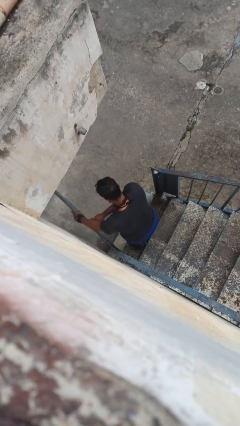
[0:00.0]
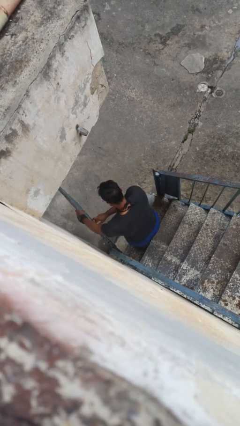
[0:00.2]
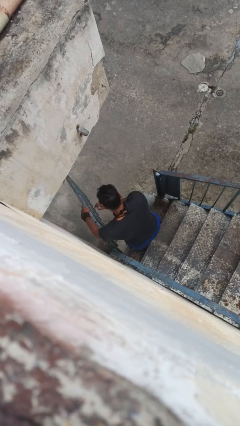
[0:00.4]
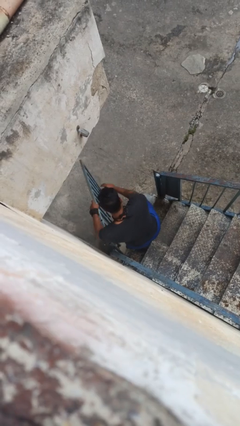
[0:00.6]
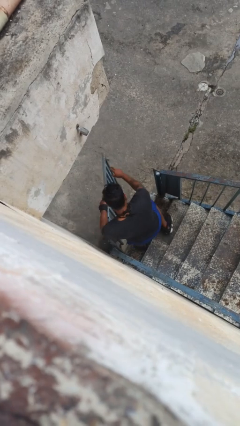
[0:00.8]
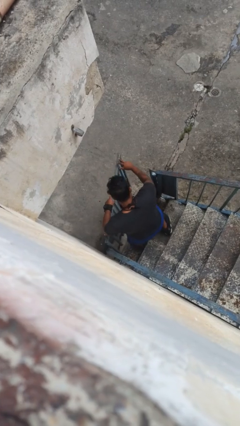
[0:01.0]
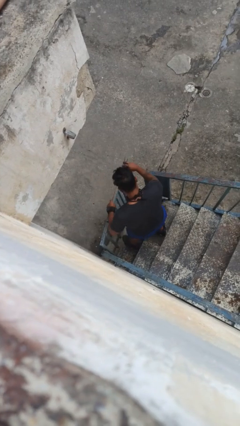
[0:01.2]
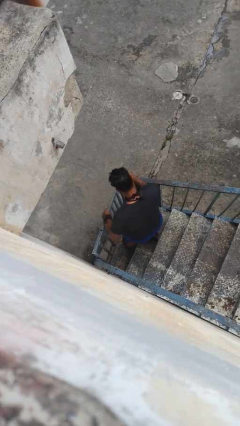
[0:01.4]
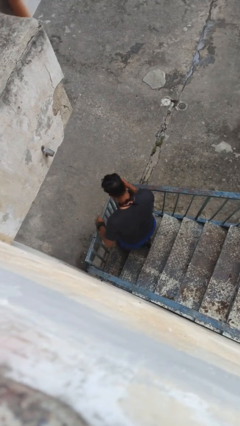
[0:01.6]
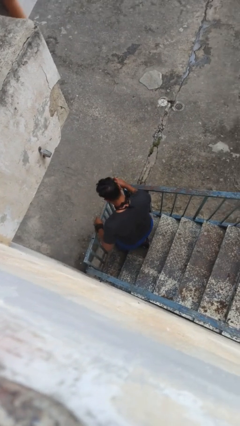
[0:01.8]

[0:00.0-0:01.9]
person closes facility door

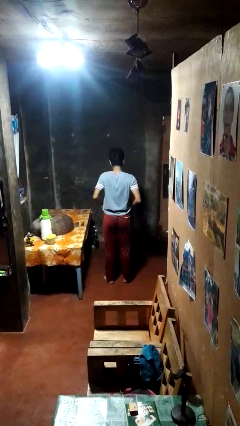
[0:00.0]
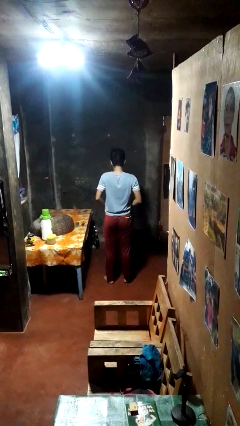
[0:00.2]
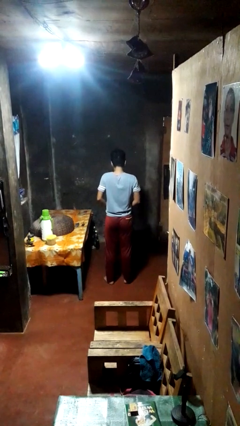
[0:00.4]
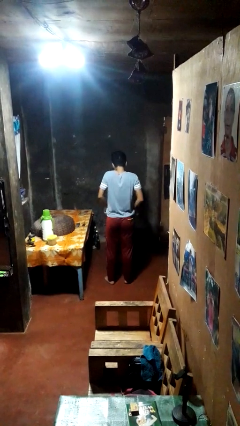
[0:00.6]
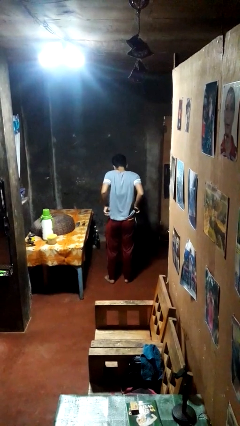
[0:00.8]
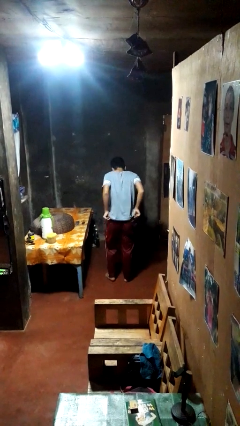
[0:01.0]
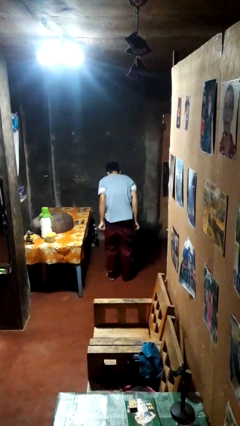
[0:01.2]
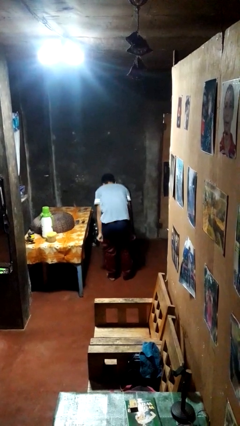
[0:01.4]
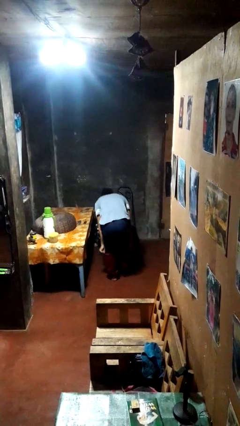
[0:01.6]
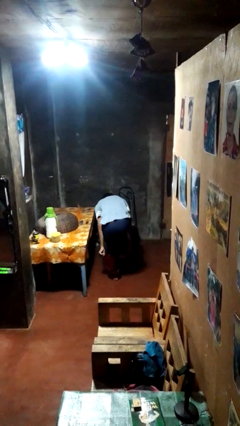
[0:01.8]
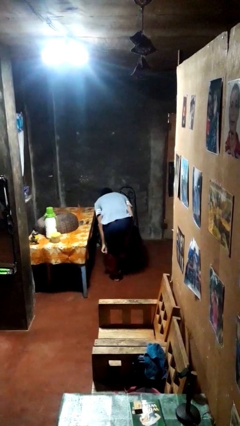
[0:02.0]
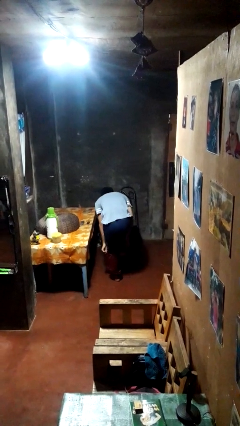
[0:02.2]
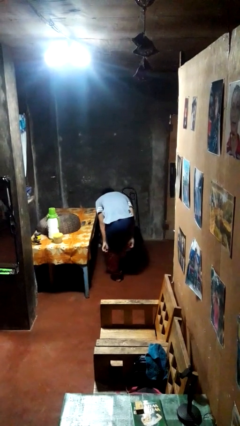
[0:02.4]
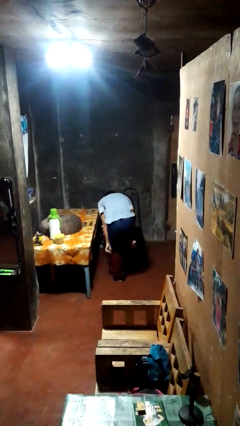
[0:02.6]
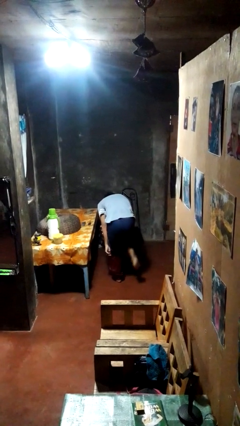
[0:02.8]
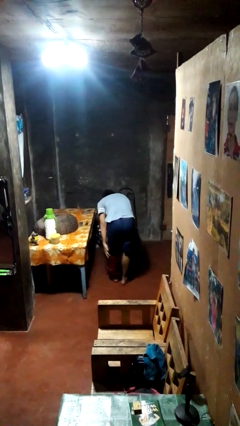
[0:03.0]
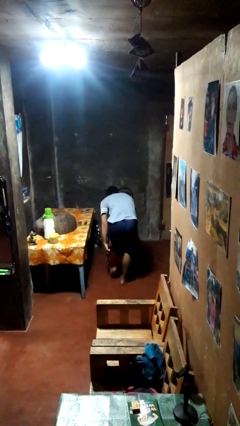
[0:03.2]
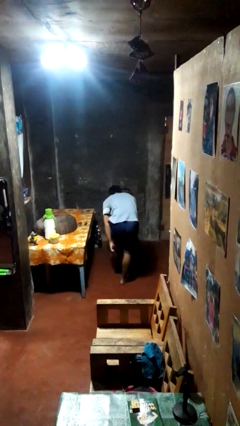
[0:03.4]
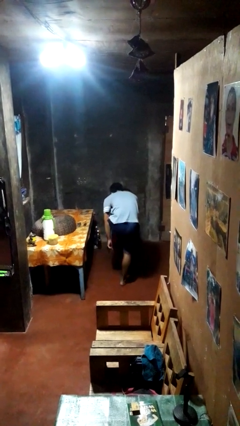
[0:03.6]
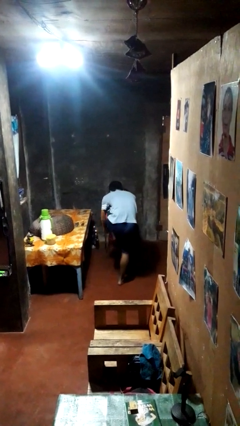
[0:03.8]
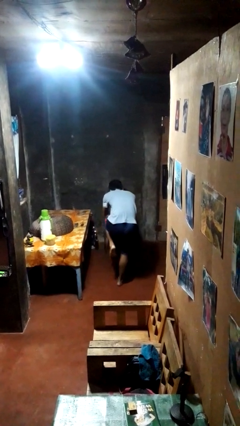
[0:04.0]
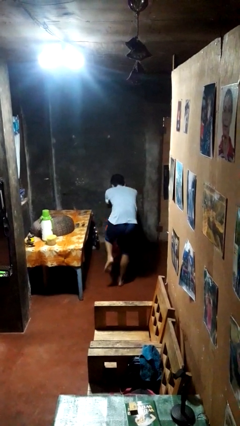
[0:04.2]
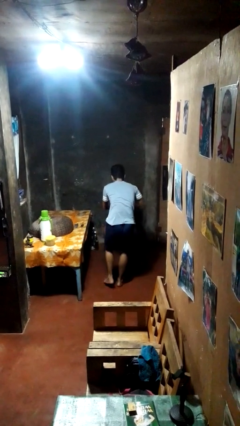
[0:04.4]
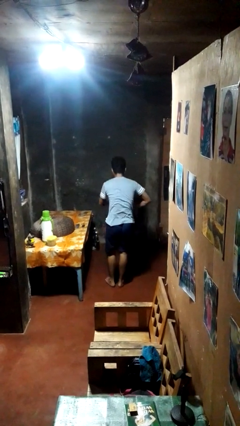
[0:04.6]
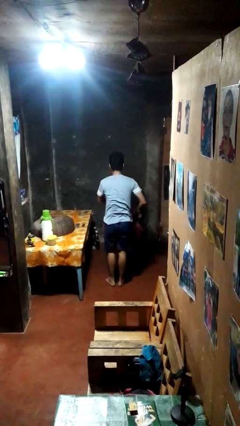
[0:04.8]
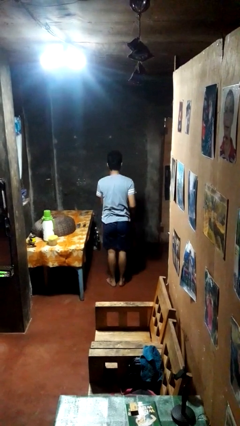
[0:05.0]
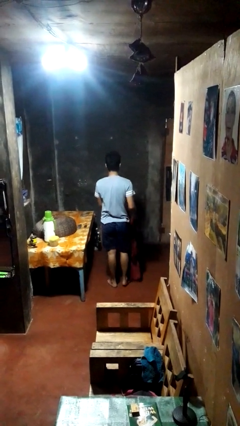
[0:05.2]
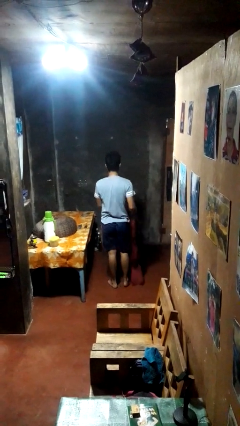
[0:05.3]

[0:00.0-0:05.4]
person takes off pants

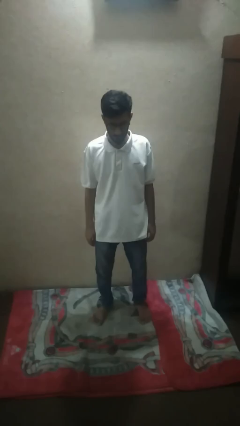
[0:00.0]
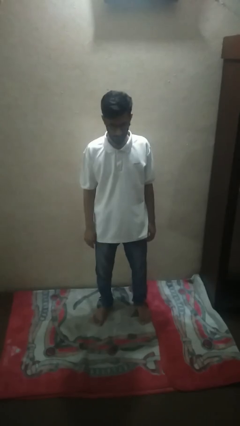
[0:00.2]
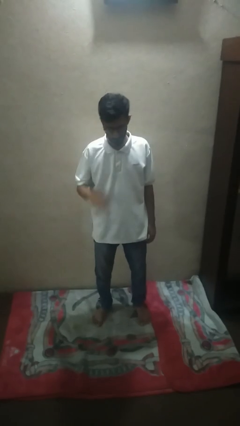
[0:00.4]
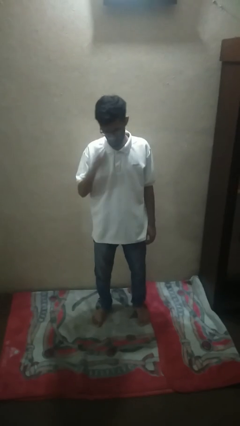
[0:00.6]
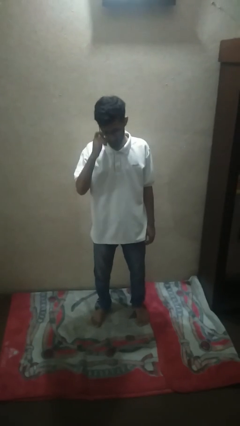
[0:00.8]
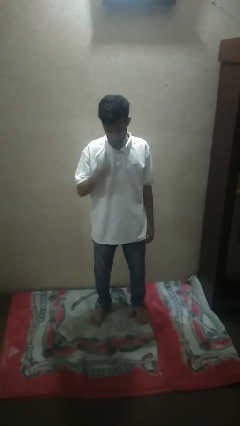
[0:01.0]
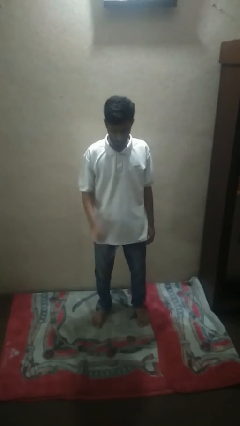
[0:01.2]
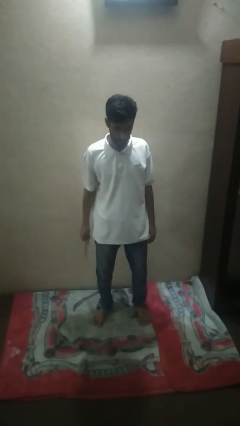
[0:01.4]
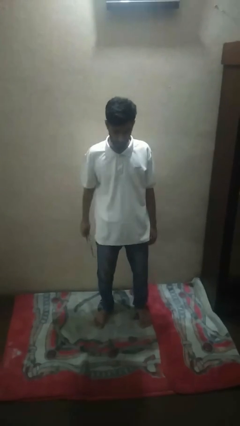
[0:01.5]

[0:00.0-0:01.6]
person takes off glasses

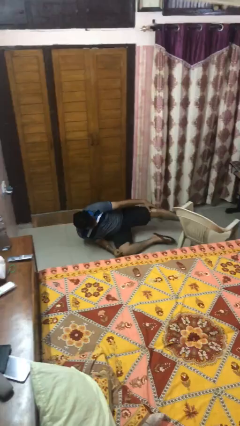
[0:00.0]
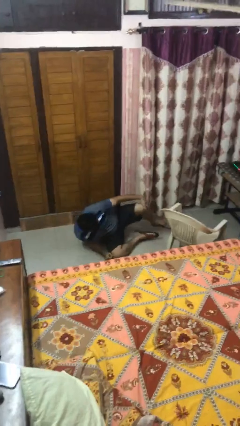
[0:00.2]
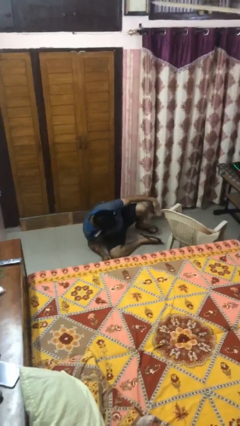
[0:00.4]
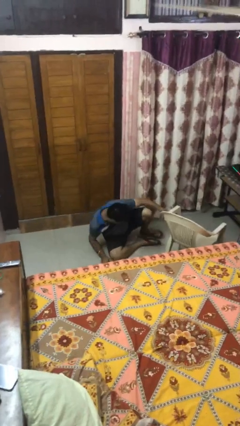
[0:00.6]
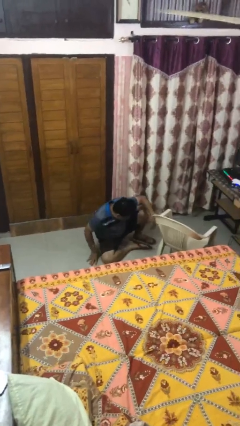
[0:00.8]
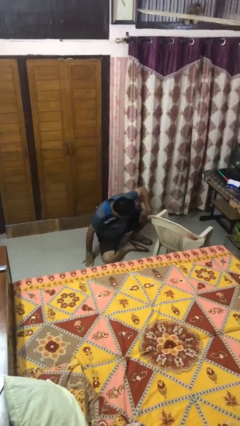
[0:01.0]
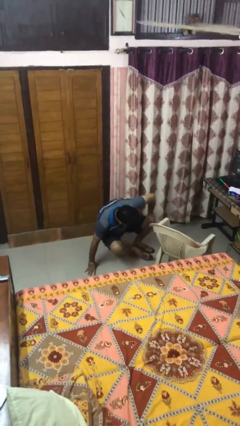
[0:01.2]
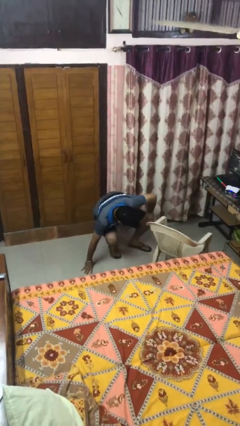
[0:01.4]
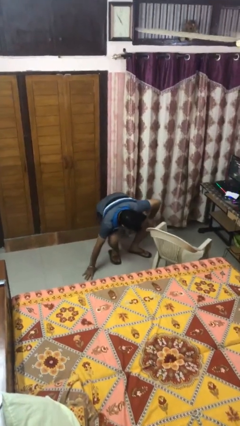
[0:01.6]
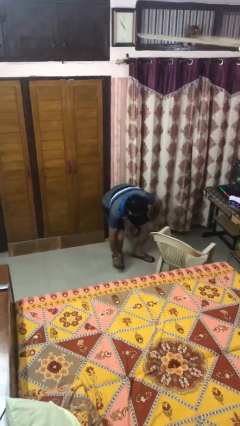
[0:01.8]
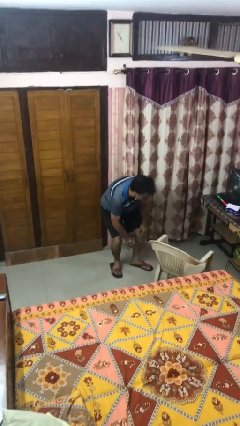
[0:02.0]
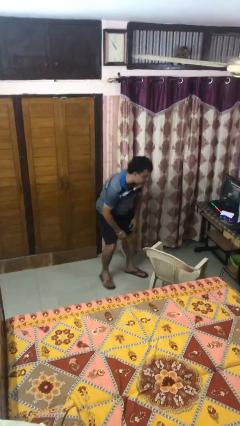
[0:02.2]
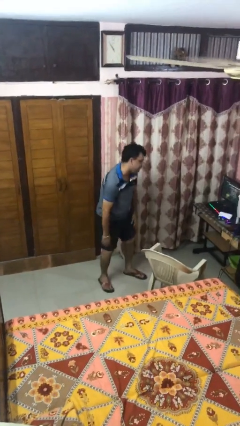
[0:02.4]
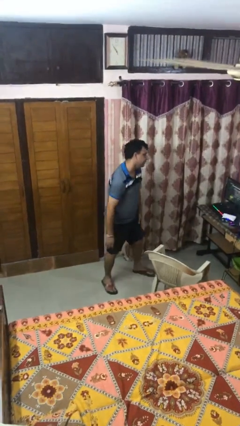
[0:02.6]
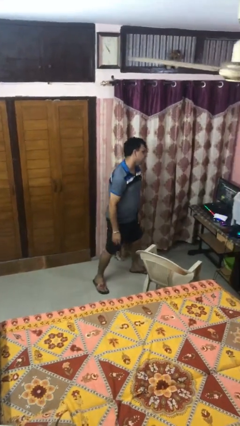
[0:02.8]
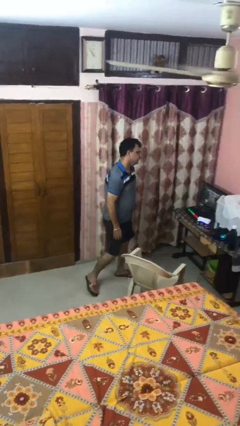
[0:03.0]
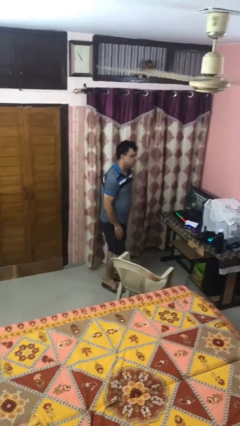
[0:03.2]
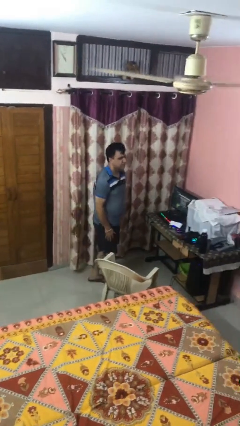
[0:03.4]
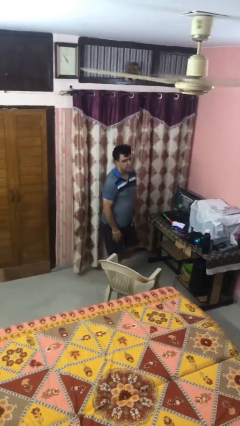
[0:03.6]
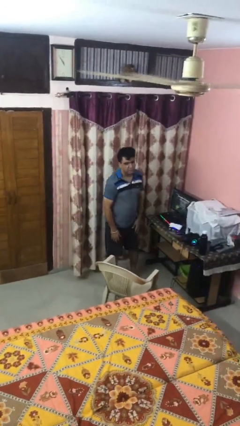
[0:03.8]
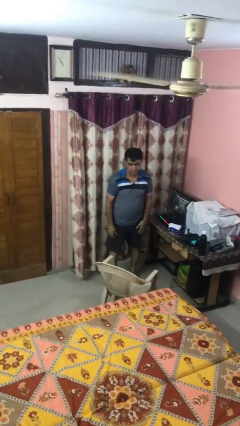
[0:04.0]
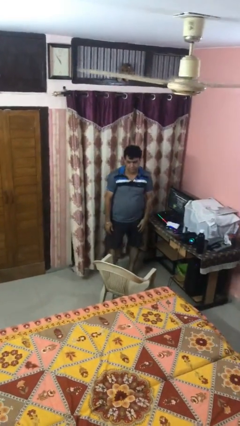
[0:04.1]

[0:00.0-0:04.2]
person stands up from floor

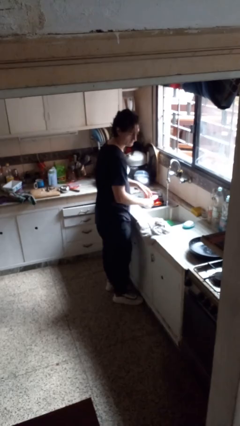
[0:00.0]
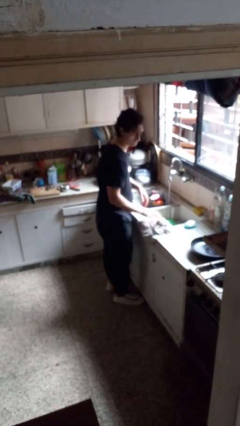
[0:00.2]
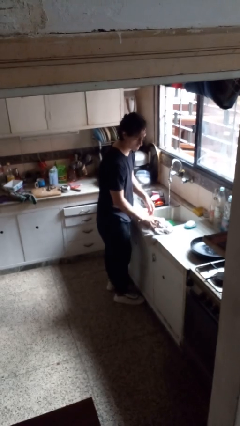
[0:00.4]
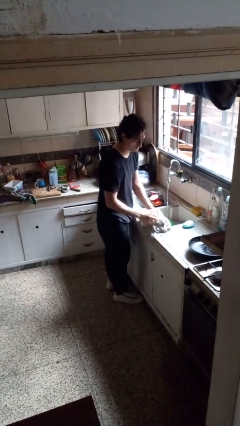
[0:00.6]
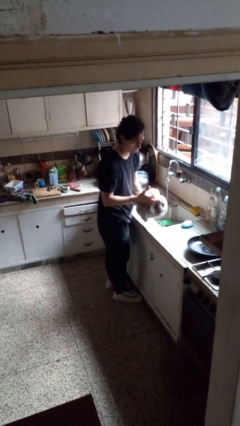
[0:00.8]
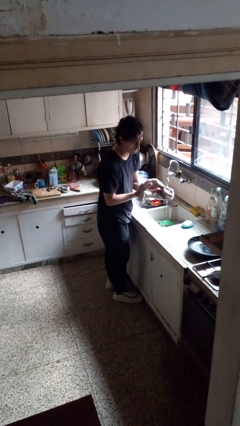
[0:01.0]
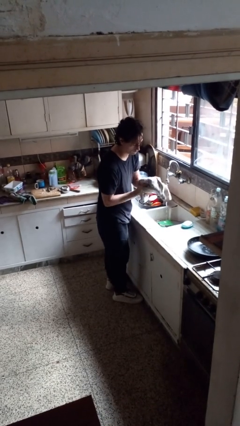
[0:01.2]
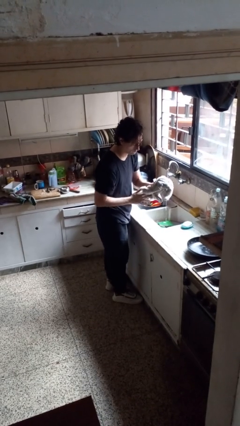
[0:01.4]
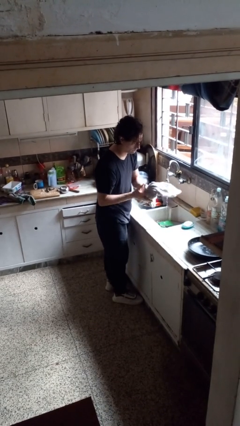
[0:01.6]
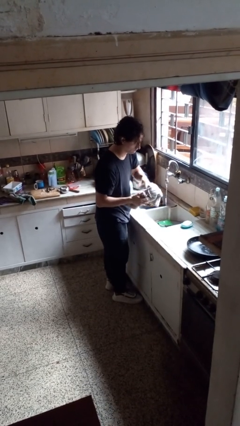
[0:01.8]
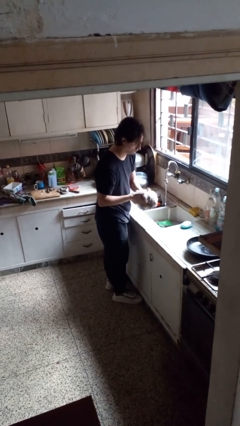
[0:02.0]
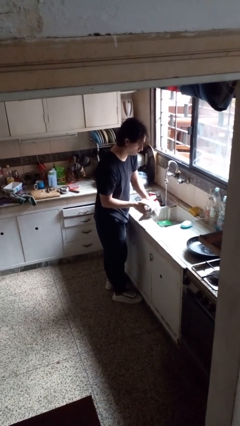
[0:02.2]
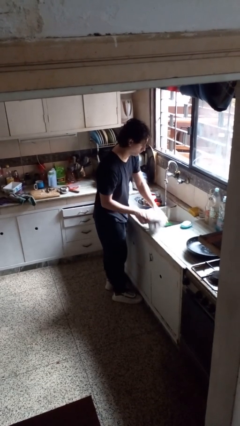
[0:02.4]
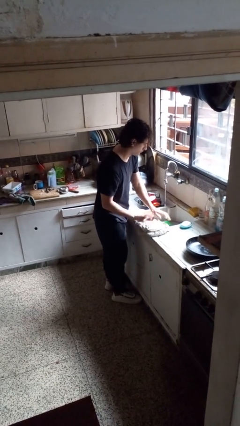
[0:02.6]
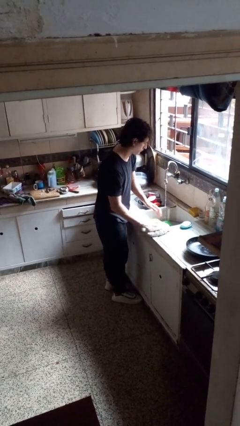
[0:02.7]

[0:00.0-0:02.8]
person dries hands with towel

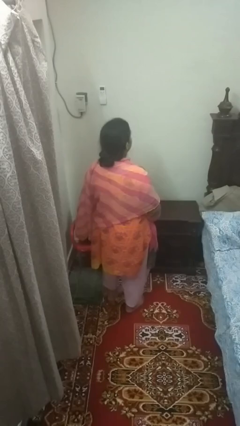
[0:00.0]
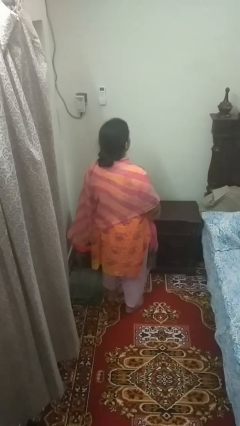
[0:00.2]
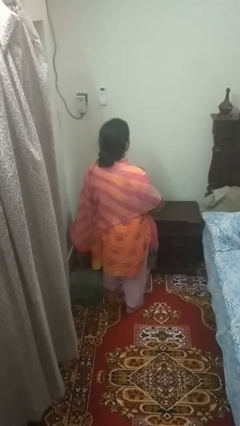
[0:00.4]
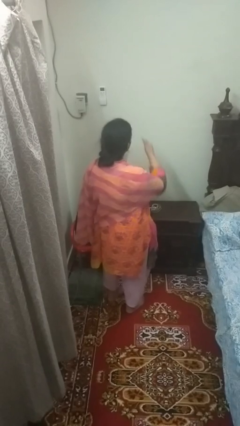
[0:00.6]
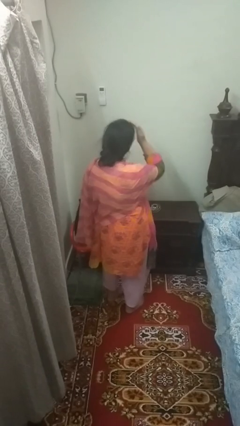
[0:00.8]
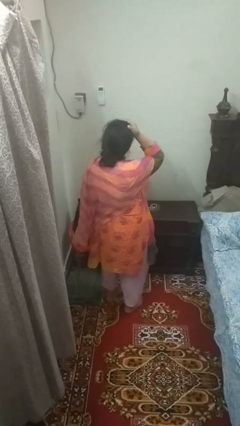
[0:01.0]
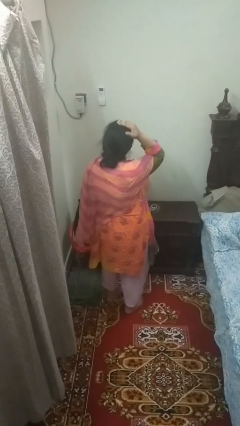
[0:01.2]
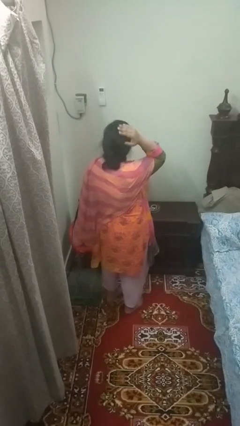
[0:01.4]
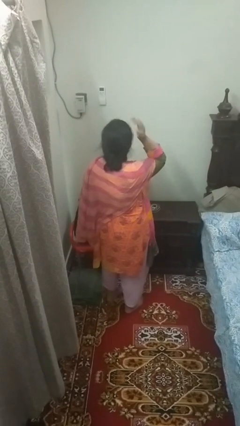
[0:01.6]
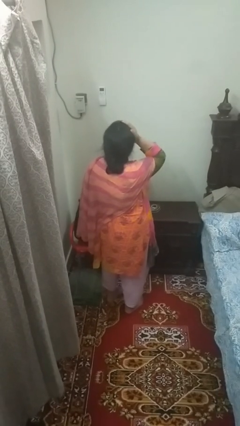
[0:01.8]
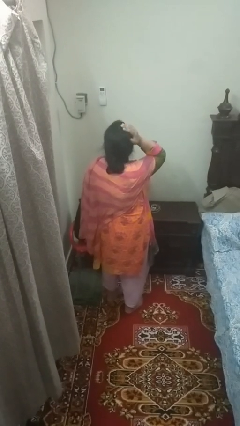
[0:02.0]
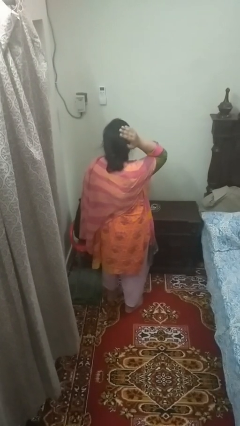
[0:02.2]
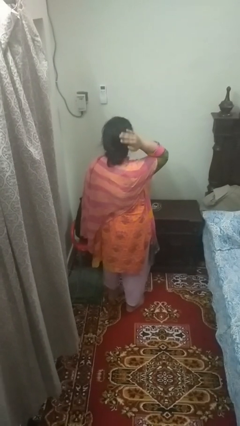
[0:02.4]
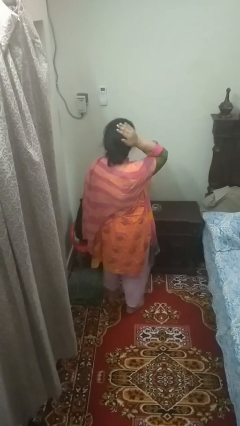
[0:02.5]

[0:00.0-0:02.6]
person strokes hair
